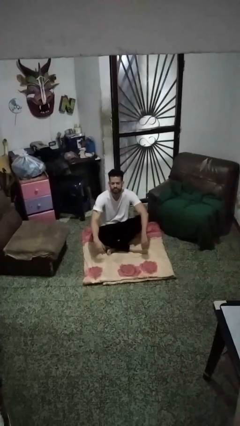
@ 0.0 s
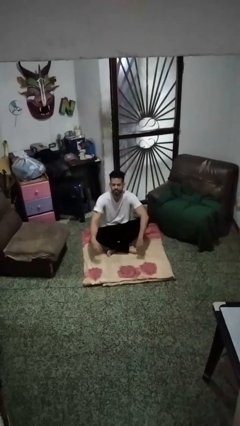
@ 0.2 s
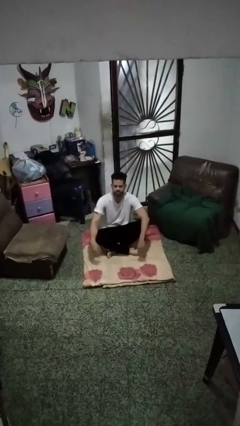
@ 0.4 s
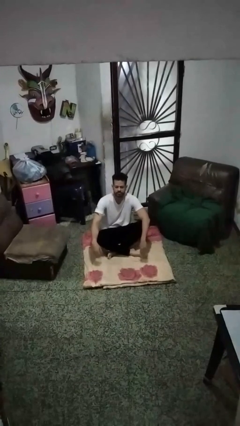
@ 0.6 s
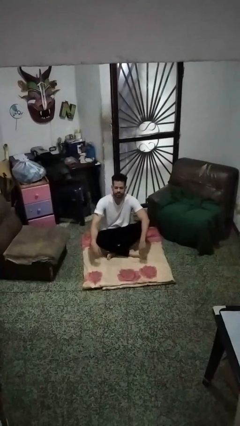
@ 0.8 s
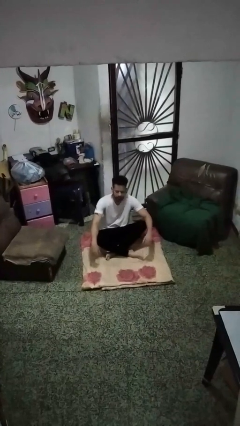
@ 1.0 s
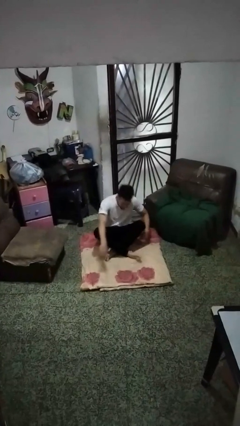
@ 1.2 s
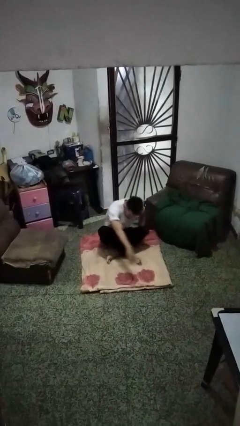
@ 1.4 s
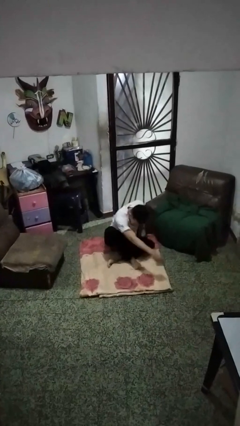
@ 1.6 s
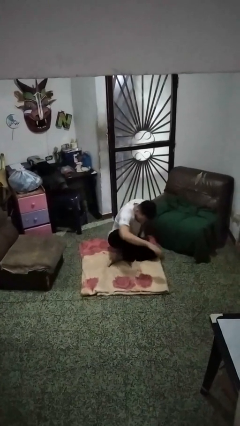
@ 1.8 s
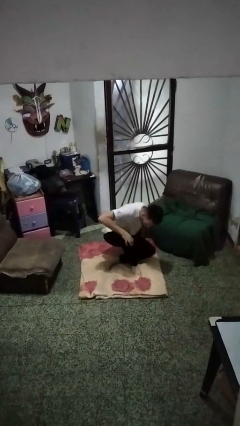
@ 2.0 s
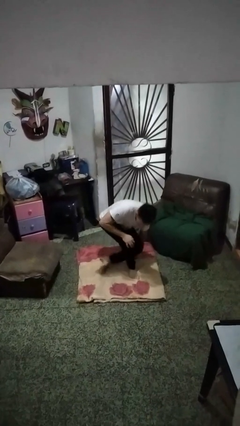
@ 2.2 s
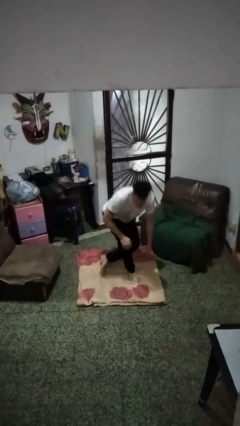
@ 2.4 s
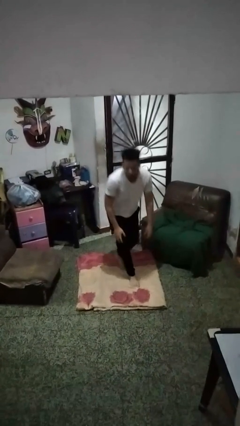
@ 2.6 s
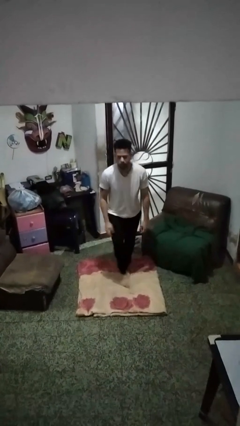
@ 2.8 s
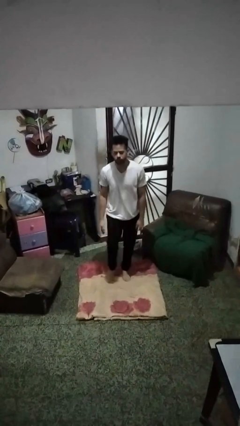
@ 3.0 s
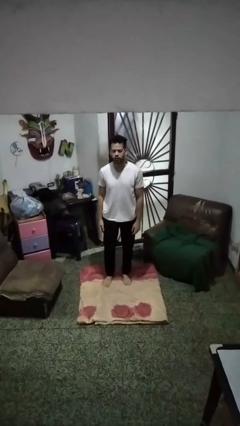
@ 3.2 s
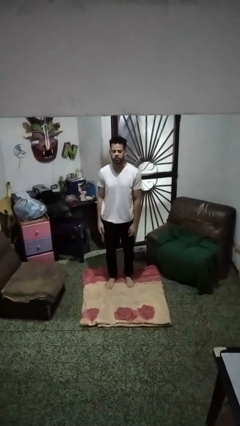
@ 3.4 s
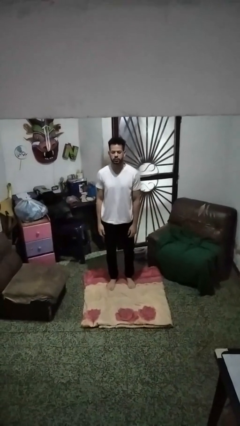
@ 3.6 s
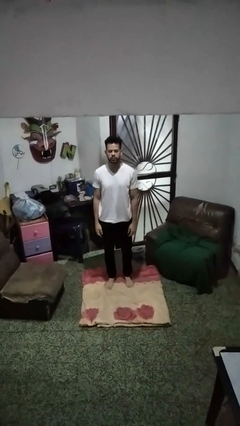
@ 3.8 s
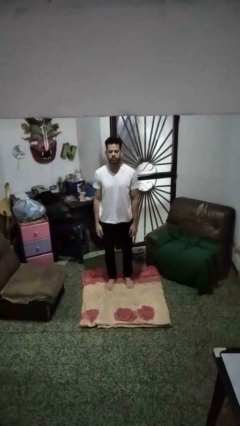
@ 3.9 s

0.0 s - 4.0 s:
person stands up from floor

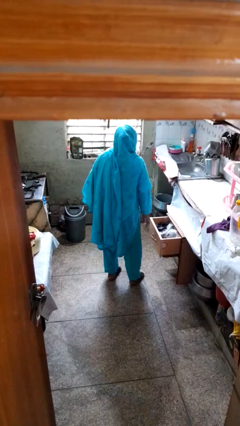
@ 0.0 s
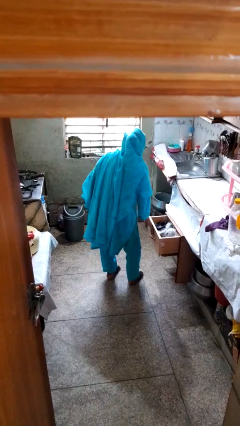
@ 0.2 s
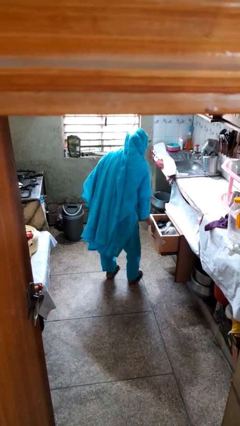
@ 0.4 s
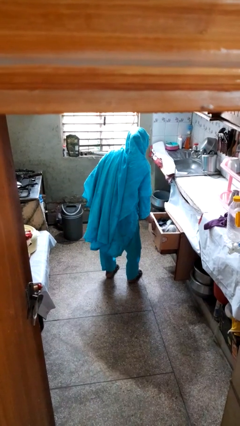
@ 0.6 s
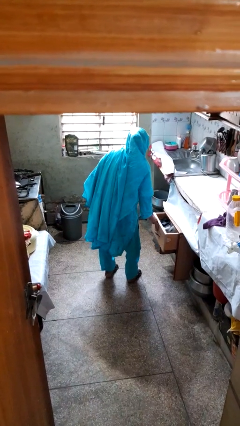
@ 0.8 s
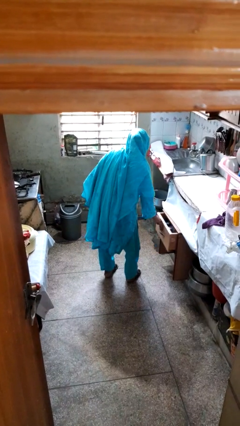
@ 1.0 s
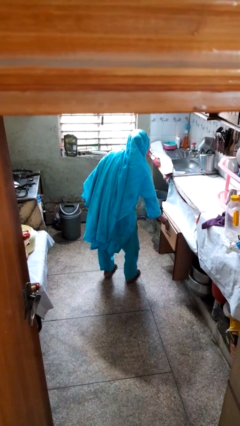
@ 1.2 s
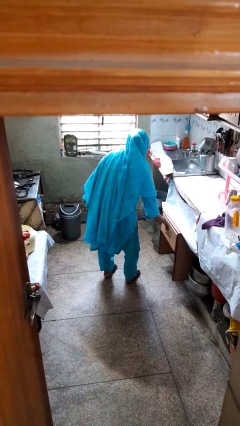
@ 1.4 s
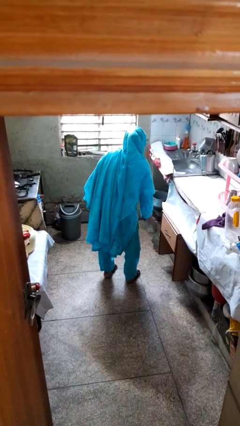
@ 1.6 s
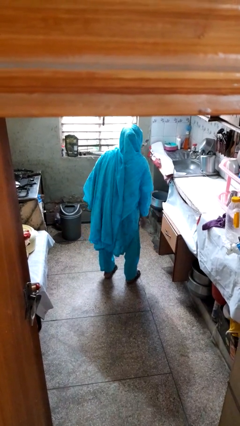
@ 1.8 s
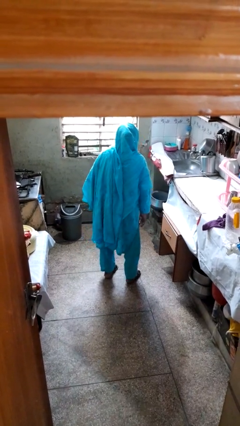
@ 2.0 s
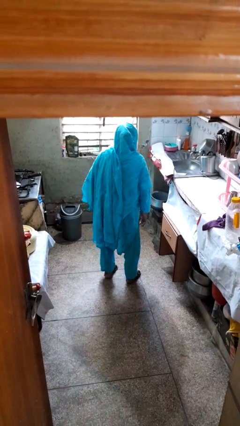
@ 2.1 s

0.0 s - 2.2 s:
person closes kitchen drawer

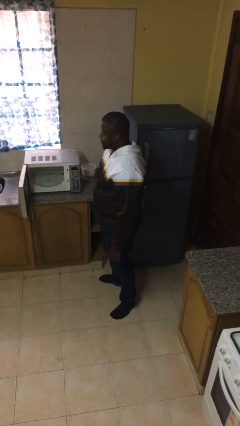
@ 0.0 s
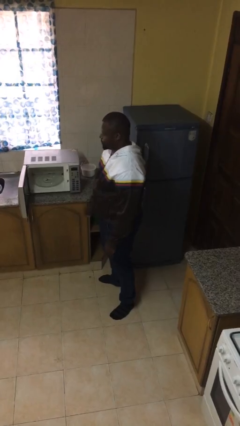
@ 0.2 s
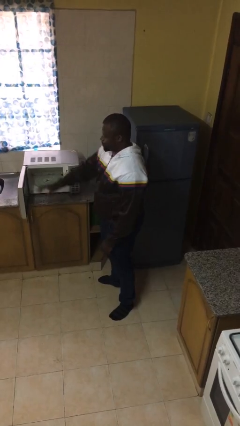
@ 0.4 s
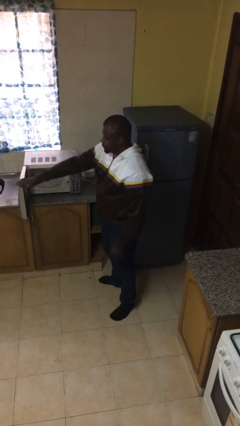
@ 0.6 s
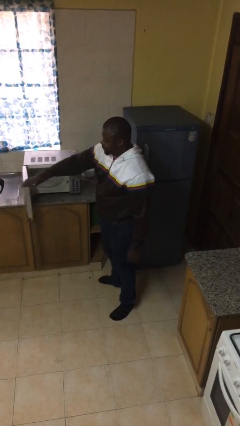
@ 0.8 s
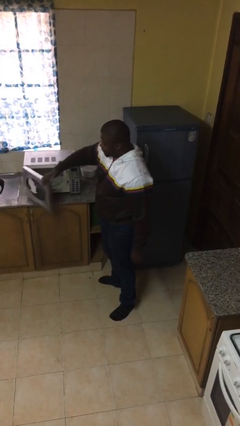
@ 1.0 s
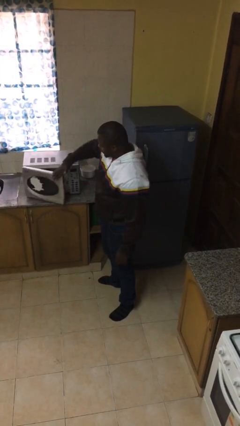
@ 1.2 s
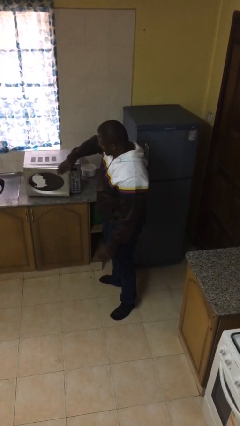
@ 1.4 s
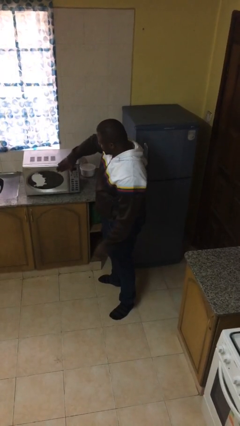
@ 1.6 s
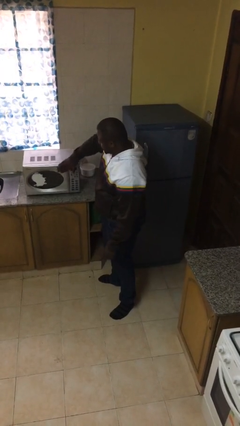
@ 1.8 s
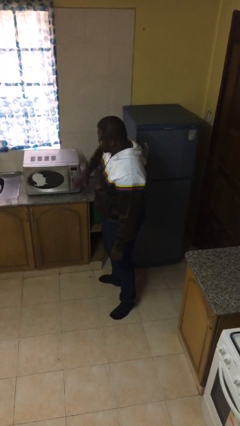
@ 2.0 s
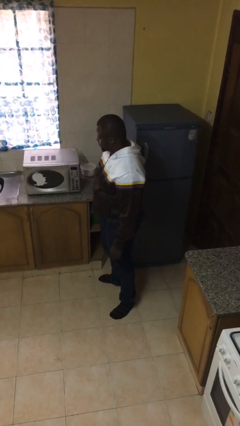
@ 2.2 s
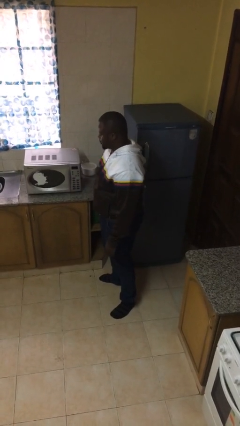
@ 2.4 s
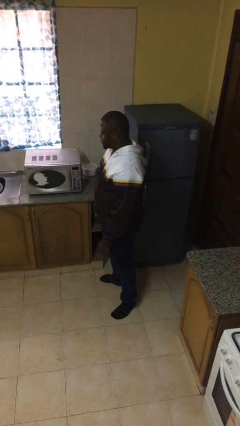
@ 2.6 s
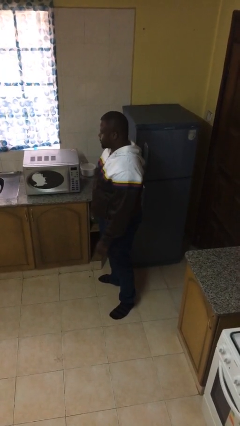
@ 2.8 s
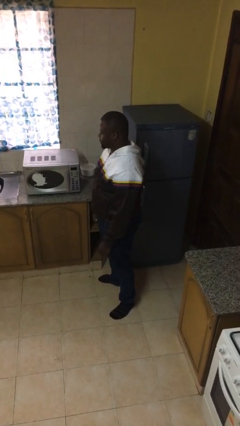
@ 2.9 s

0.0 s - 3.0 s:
person closes microwave

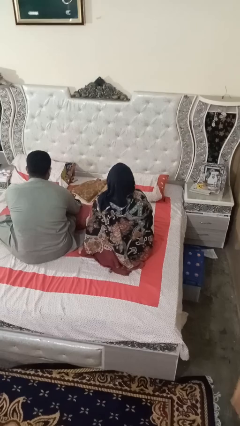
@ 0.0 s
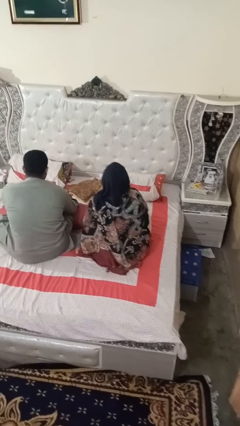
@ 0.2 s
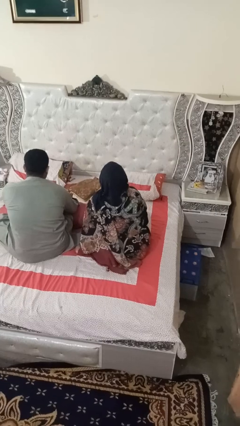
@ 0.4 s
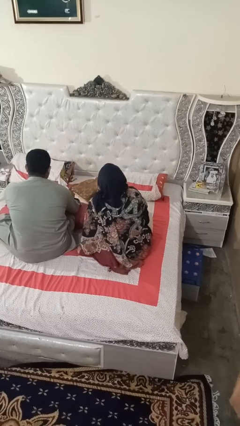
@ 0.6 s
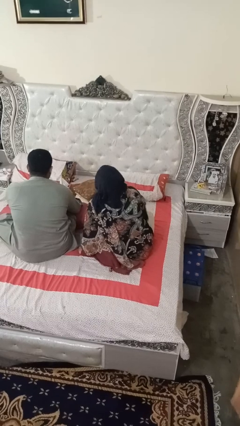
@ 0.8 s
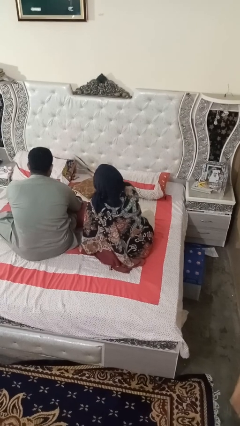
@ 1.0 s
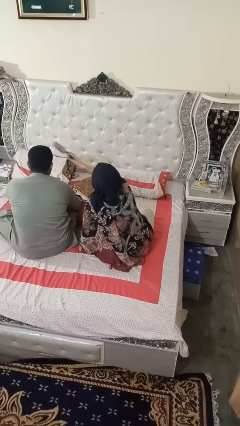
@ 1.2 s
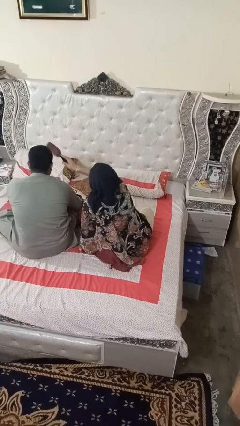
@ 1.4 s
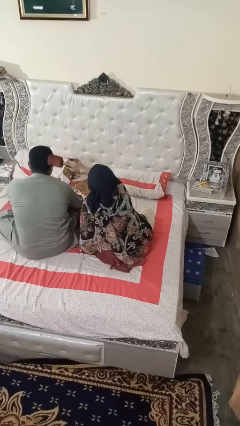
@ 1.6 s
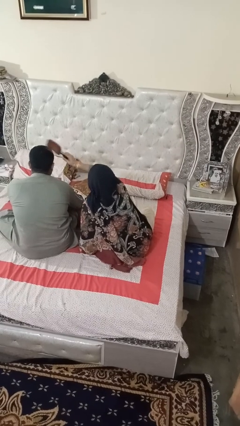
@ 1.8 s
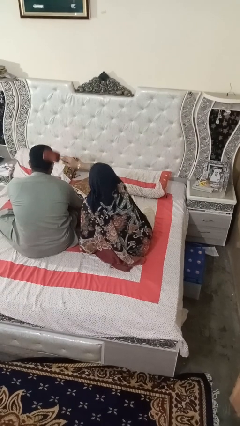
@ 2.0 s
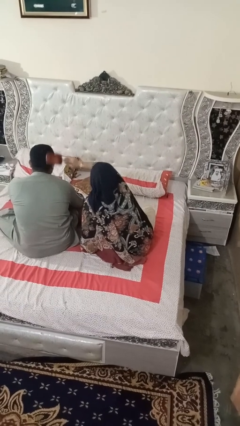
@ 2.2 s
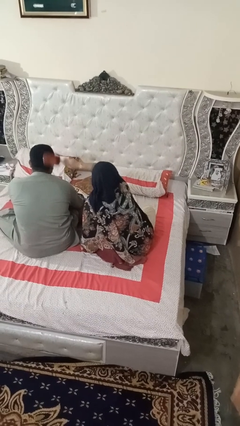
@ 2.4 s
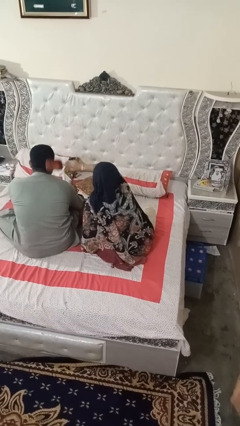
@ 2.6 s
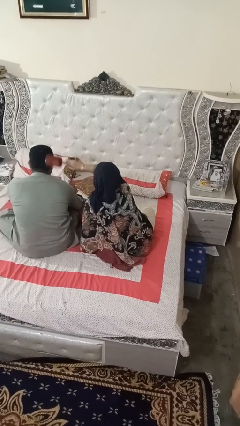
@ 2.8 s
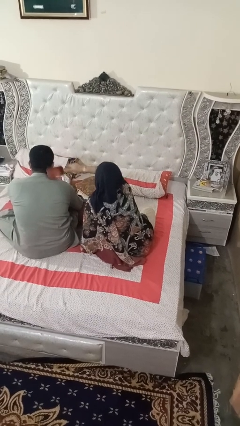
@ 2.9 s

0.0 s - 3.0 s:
person brushes hair of person

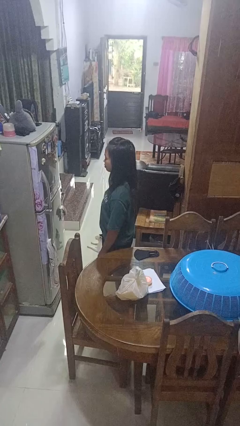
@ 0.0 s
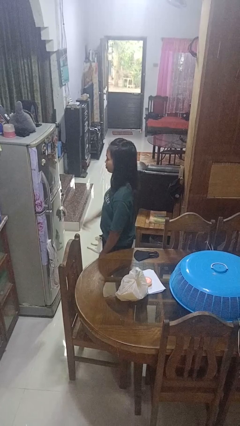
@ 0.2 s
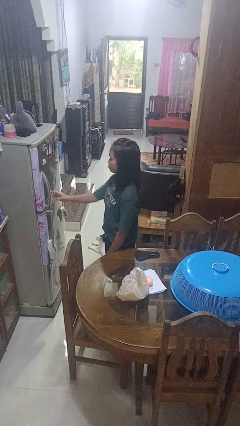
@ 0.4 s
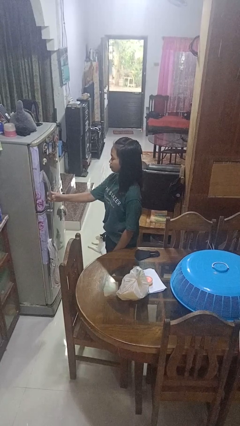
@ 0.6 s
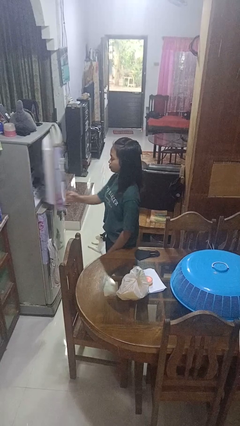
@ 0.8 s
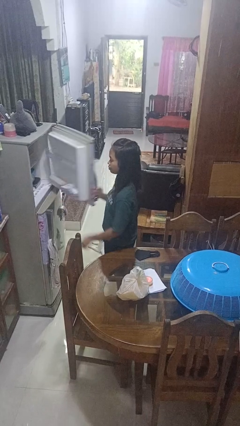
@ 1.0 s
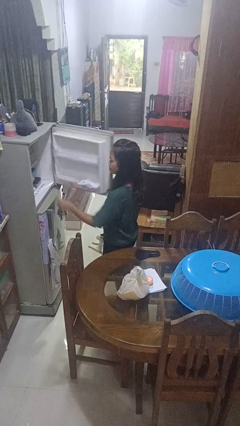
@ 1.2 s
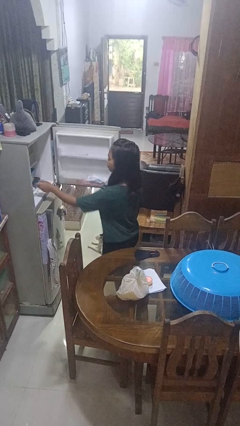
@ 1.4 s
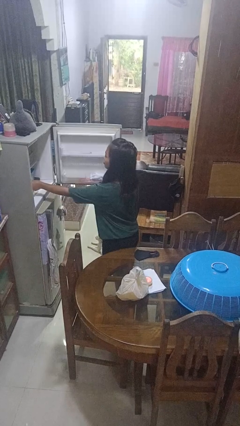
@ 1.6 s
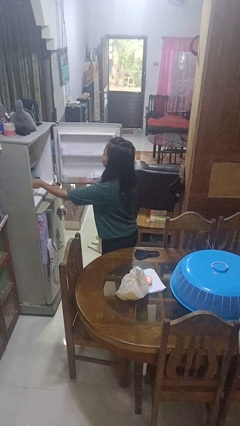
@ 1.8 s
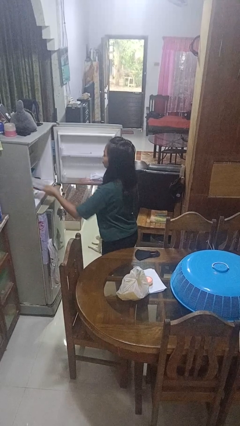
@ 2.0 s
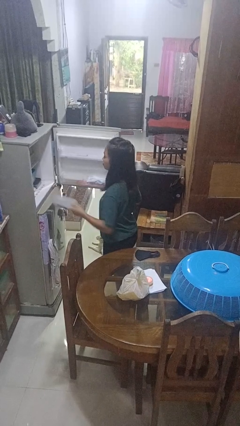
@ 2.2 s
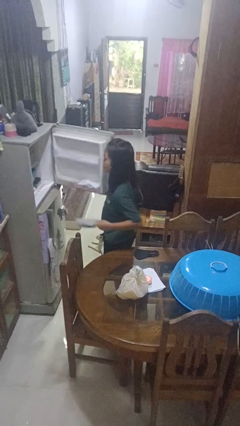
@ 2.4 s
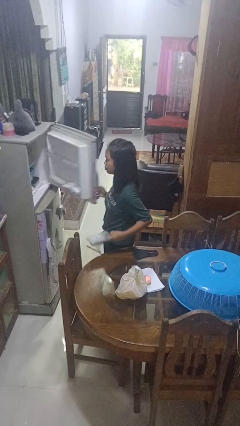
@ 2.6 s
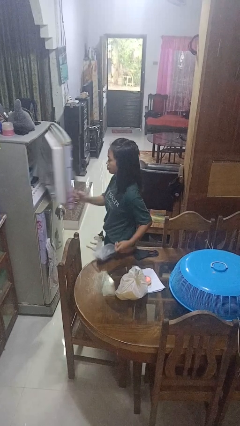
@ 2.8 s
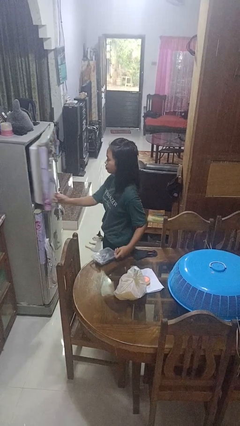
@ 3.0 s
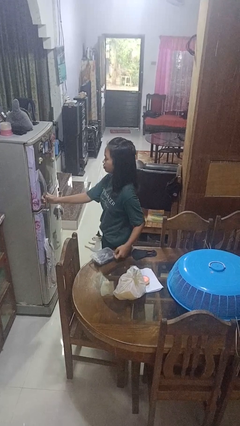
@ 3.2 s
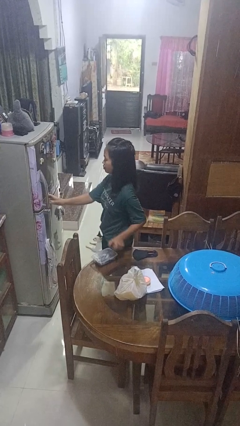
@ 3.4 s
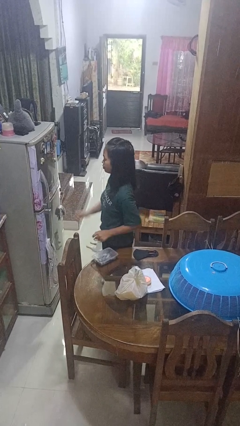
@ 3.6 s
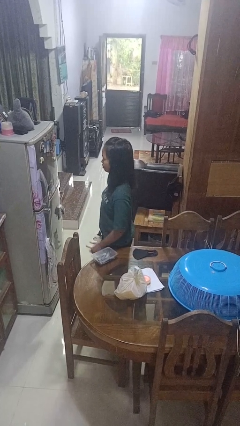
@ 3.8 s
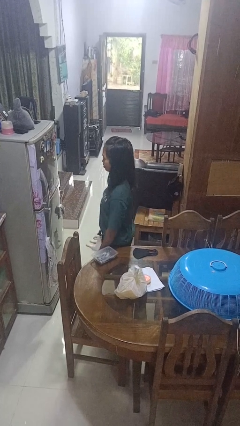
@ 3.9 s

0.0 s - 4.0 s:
person takes object from refrigerator

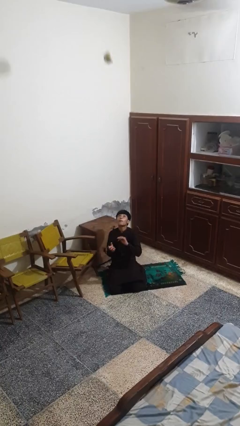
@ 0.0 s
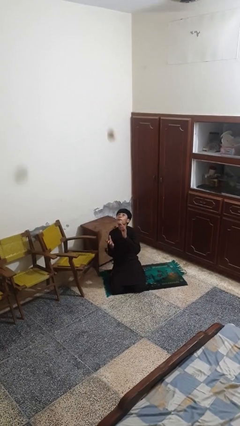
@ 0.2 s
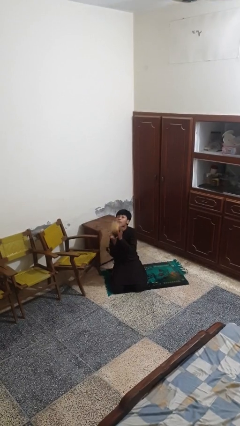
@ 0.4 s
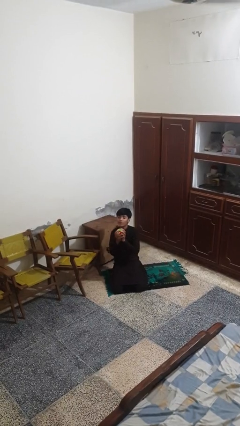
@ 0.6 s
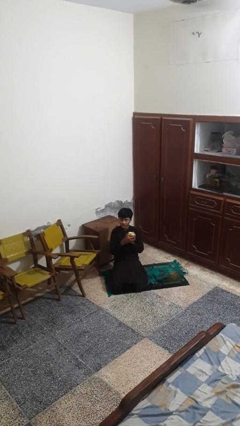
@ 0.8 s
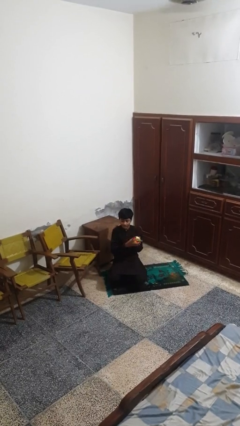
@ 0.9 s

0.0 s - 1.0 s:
person catches dropped object

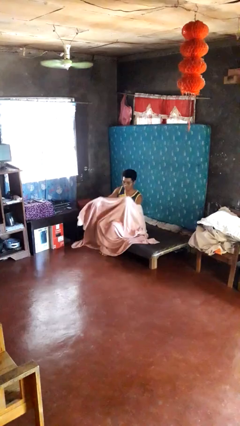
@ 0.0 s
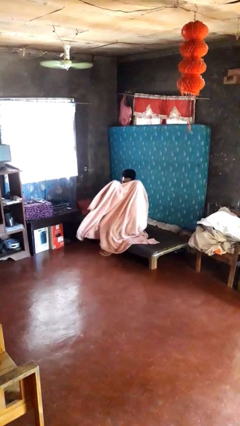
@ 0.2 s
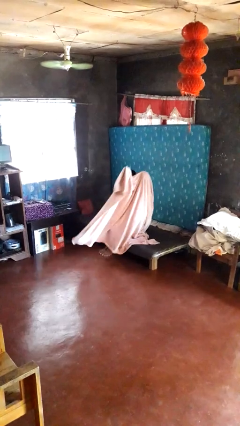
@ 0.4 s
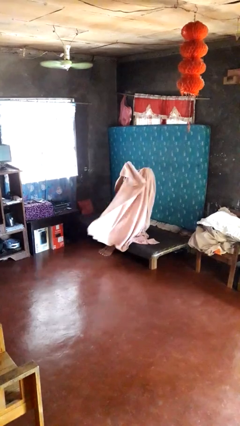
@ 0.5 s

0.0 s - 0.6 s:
person uncovers with blanket
